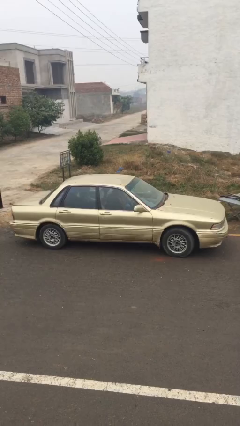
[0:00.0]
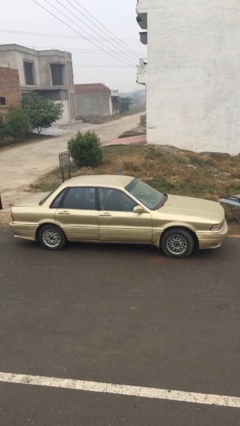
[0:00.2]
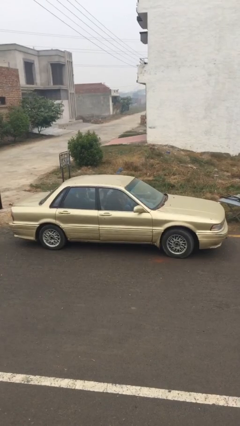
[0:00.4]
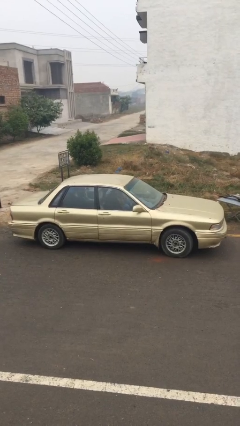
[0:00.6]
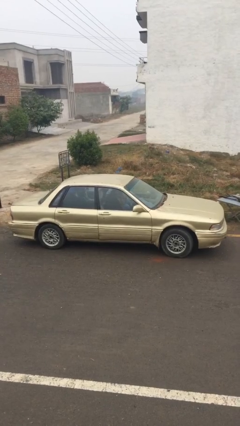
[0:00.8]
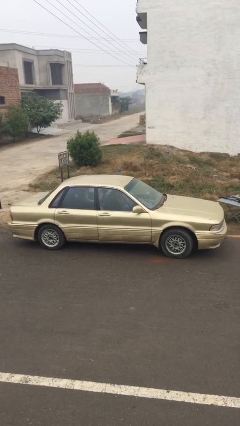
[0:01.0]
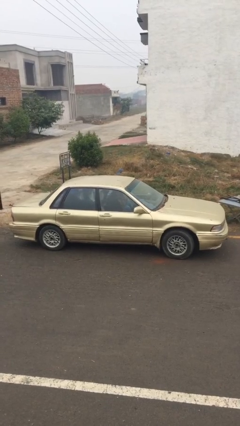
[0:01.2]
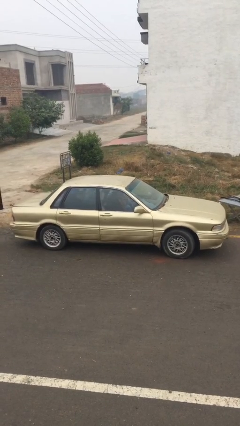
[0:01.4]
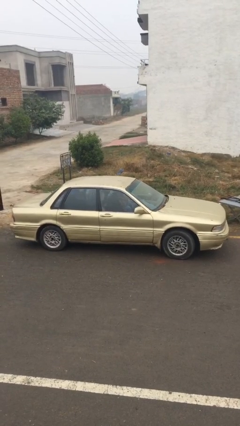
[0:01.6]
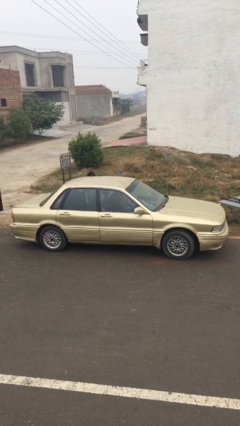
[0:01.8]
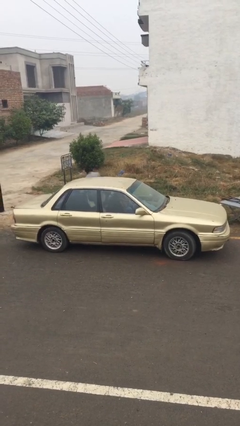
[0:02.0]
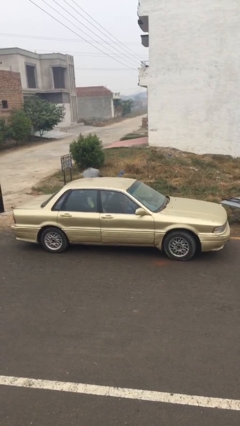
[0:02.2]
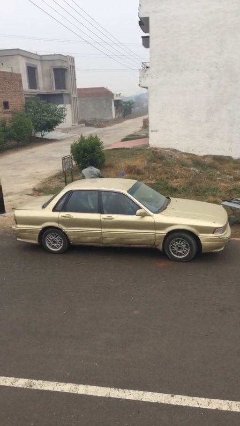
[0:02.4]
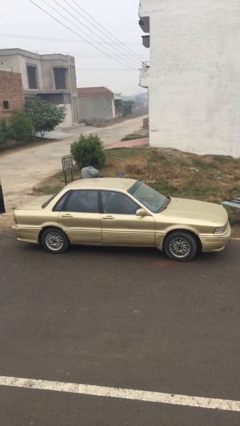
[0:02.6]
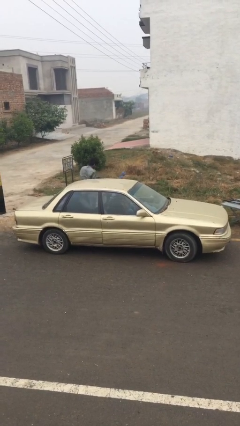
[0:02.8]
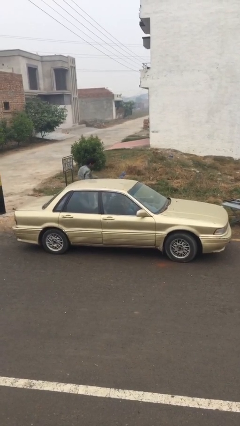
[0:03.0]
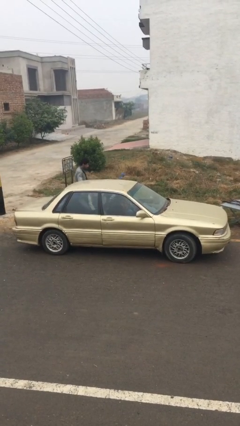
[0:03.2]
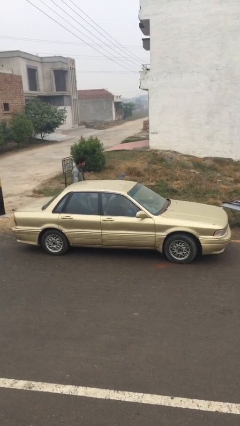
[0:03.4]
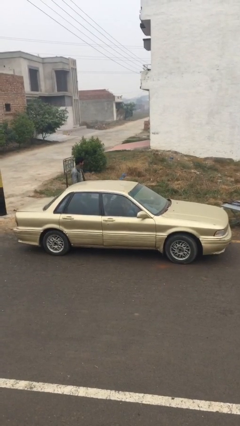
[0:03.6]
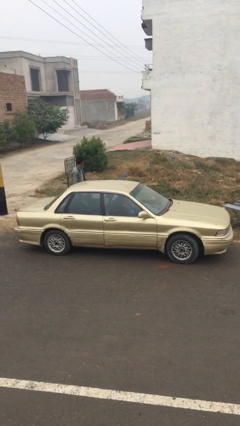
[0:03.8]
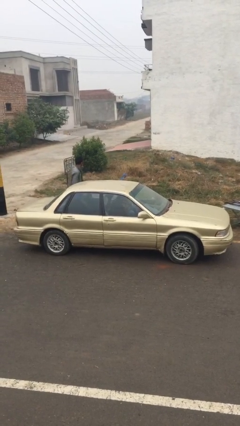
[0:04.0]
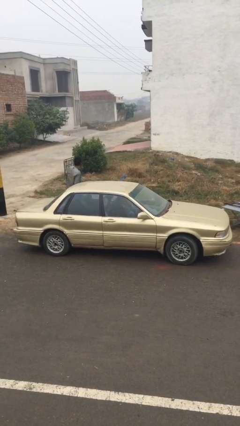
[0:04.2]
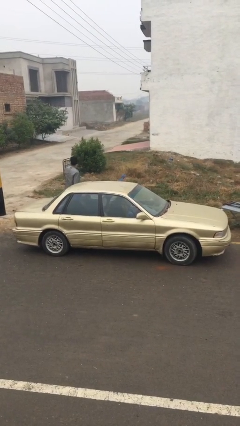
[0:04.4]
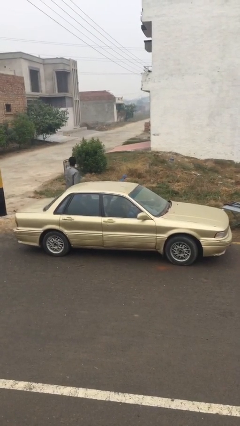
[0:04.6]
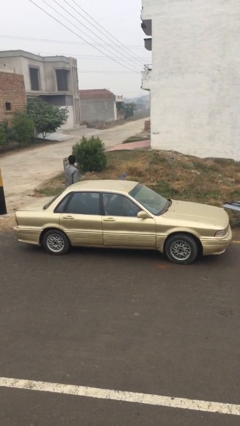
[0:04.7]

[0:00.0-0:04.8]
car drops off person

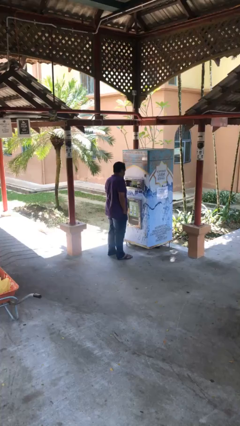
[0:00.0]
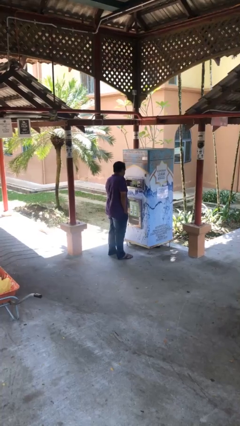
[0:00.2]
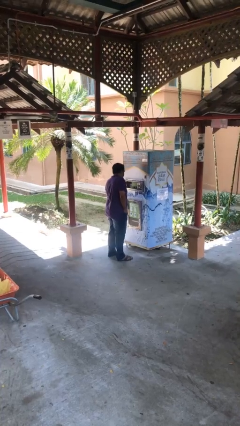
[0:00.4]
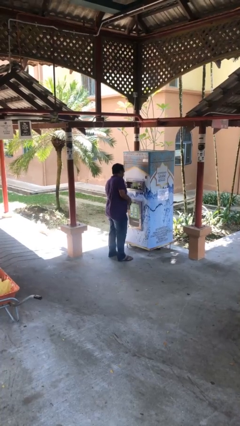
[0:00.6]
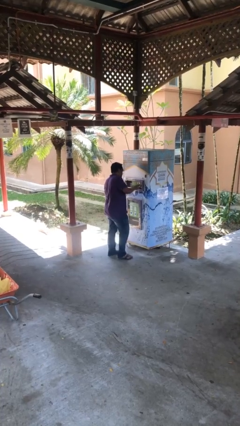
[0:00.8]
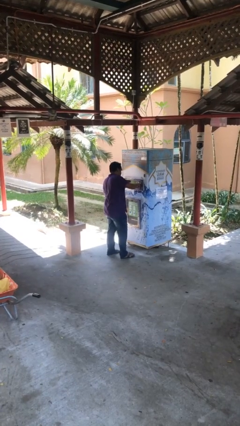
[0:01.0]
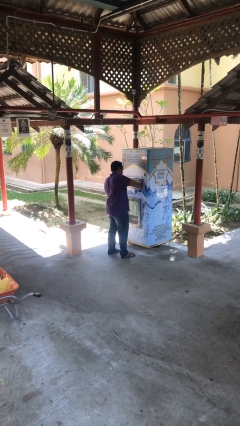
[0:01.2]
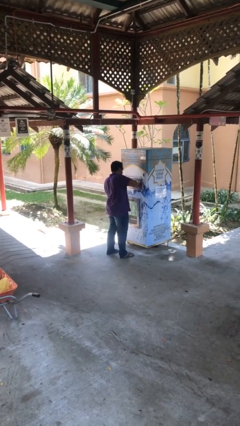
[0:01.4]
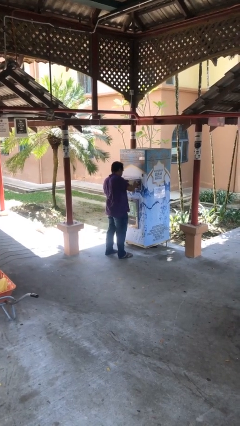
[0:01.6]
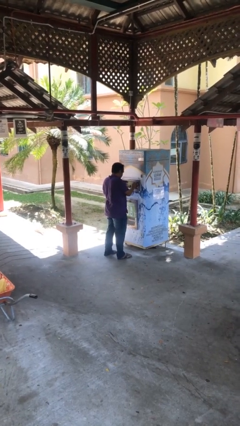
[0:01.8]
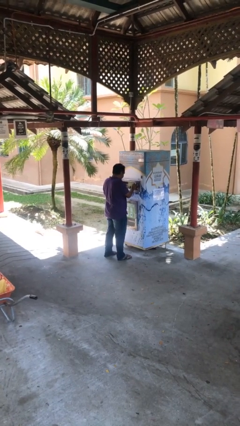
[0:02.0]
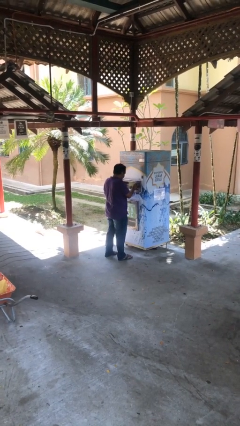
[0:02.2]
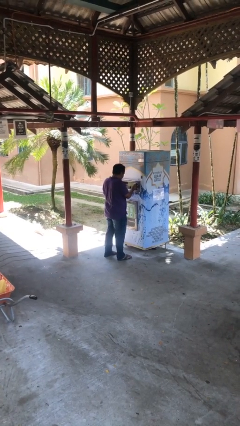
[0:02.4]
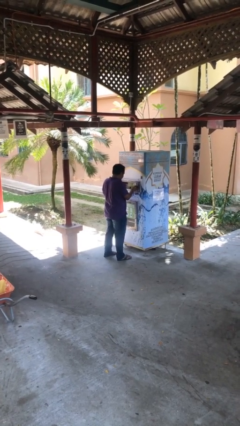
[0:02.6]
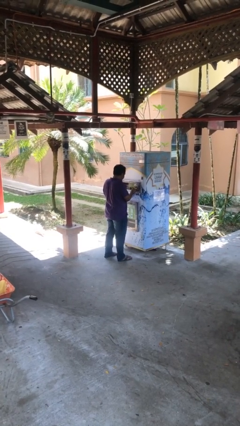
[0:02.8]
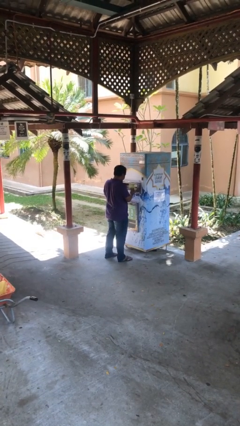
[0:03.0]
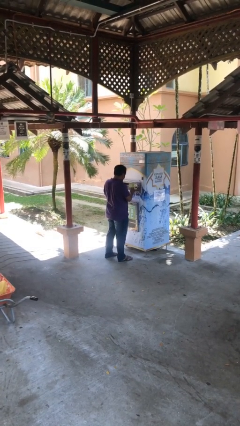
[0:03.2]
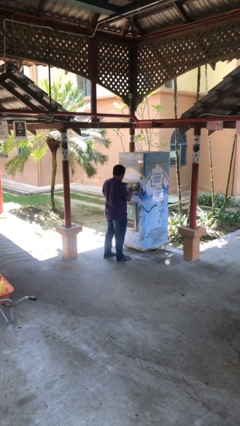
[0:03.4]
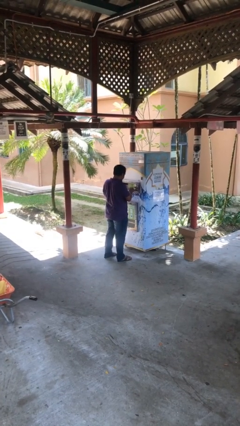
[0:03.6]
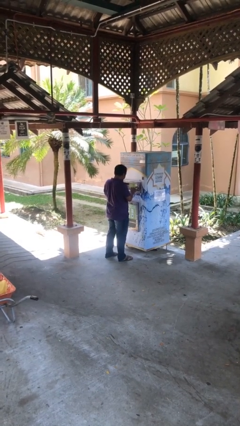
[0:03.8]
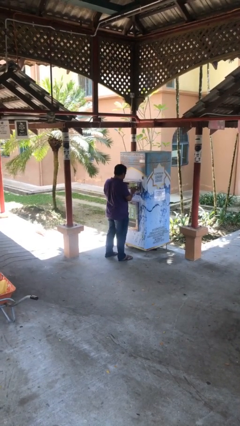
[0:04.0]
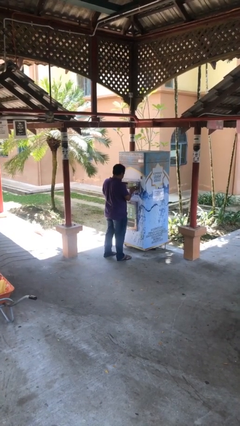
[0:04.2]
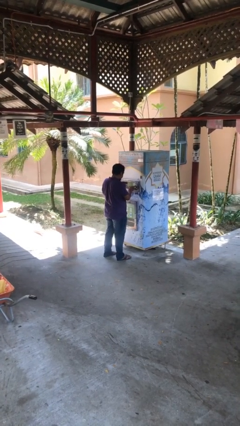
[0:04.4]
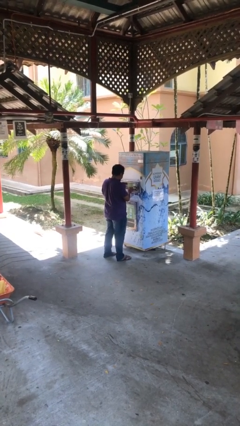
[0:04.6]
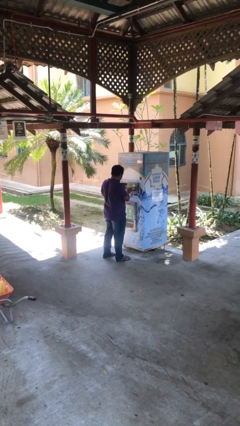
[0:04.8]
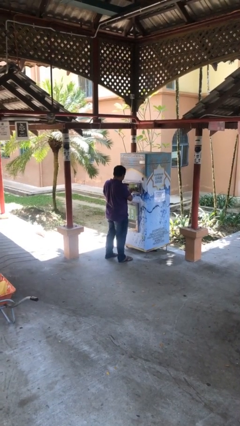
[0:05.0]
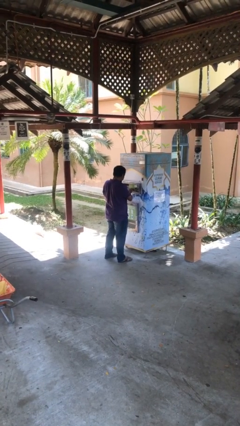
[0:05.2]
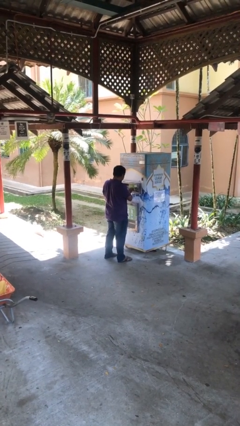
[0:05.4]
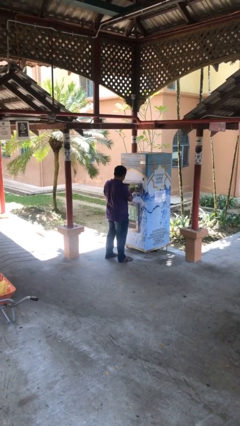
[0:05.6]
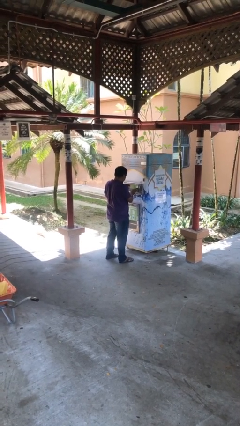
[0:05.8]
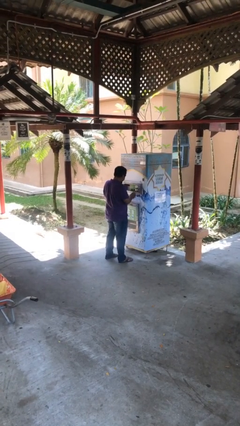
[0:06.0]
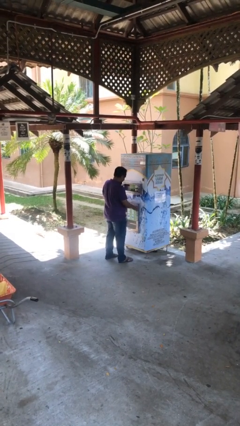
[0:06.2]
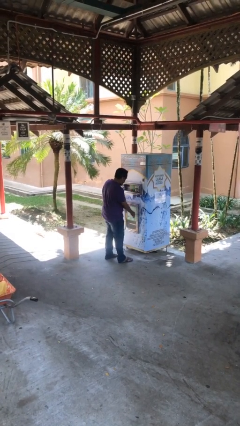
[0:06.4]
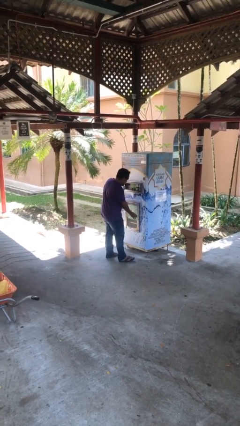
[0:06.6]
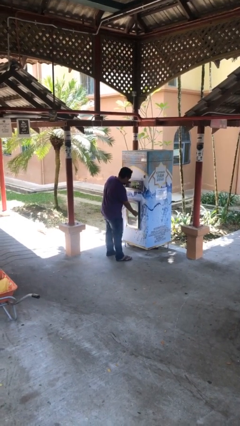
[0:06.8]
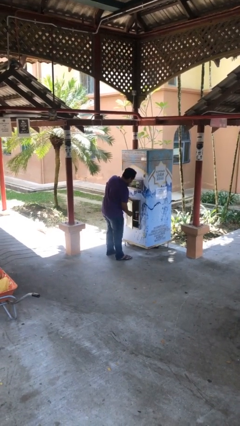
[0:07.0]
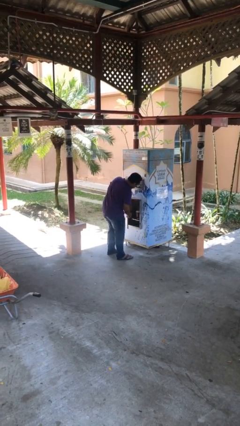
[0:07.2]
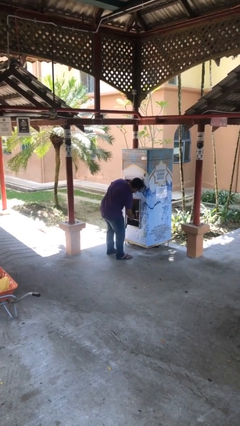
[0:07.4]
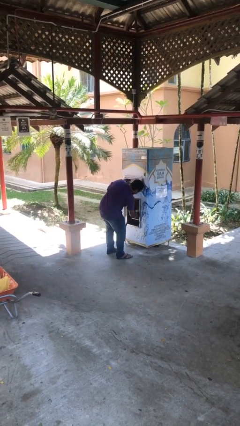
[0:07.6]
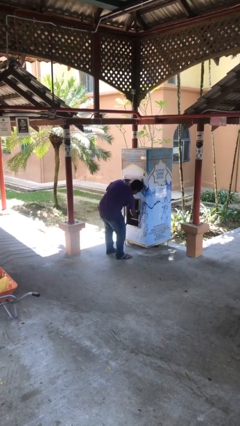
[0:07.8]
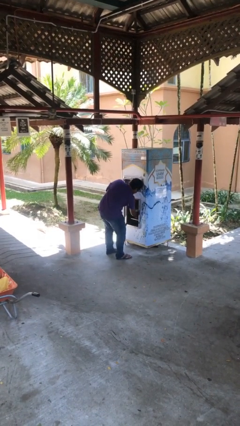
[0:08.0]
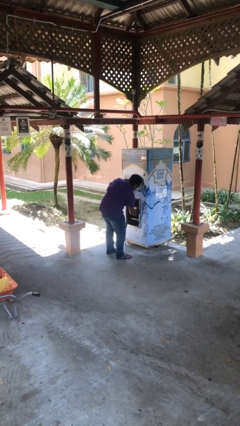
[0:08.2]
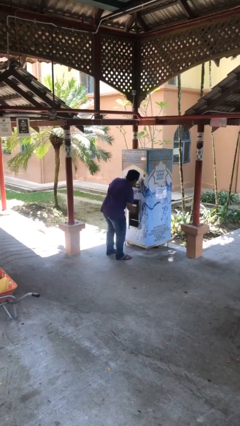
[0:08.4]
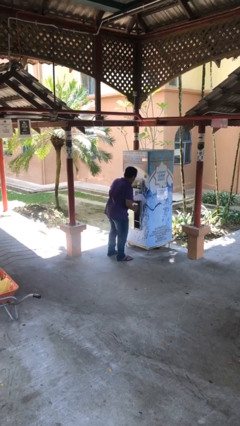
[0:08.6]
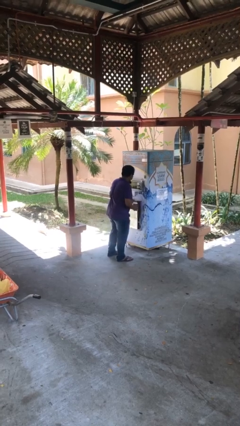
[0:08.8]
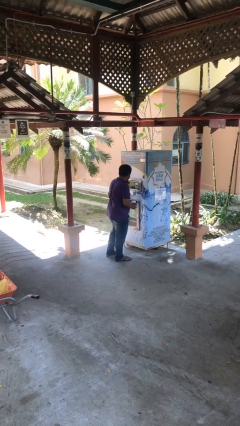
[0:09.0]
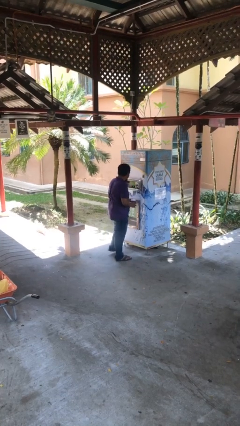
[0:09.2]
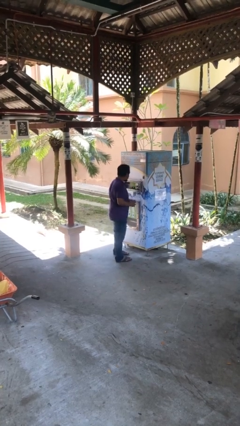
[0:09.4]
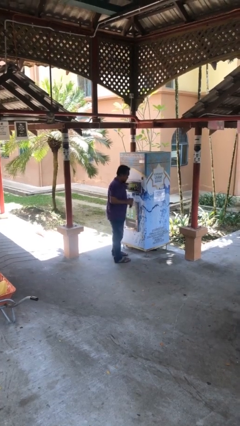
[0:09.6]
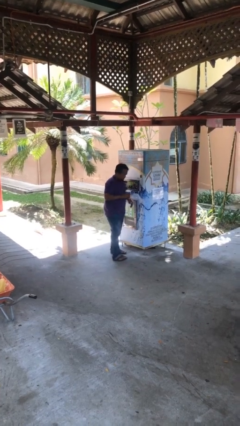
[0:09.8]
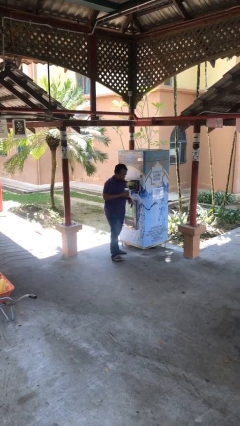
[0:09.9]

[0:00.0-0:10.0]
person purchases from machine

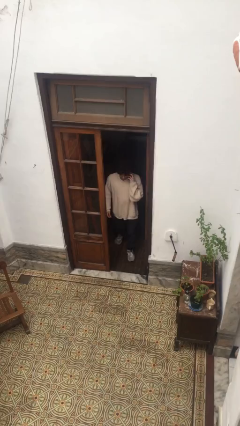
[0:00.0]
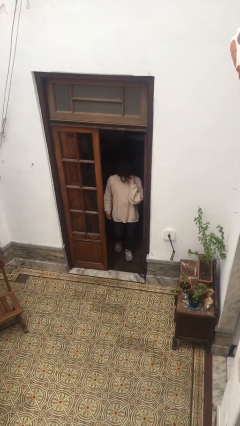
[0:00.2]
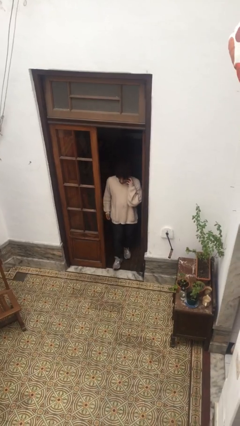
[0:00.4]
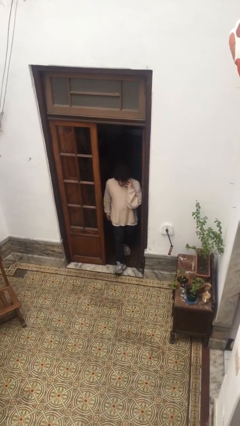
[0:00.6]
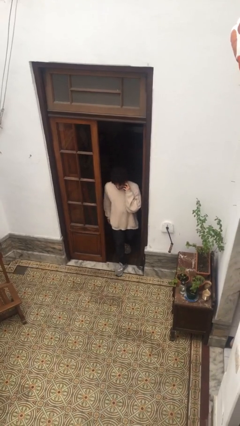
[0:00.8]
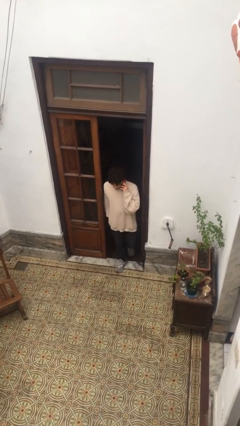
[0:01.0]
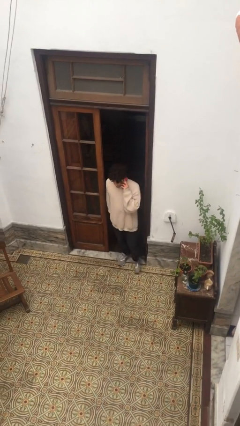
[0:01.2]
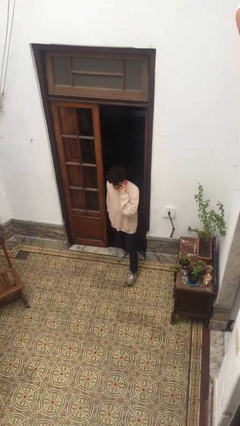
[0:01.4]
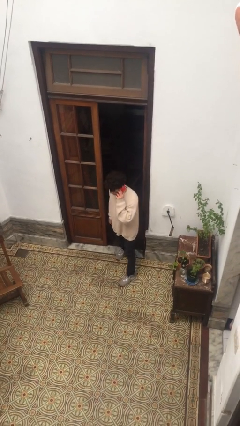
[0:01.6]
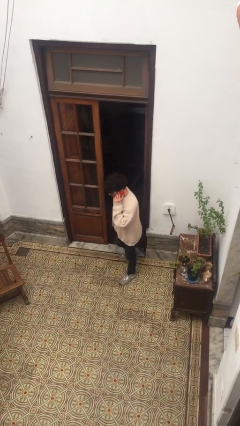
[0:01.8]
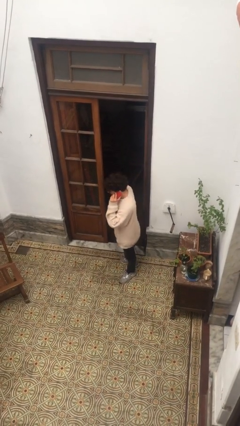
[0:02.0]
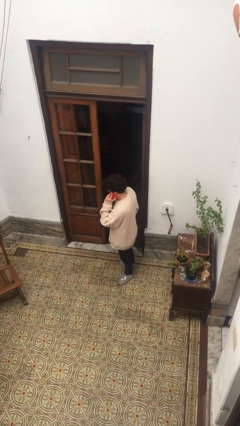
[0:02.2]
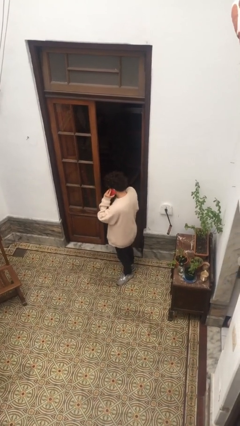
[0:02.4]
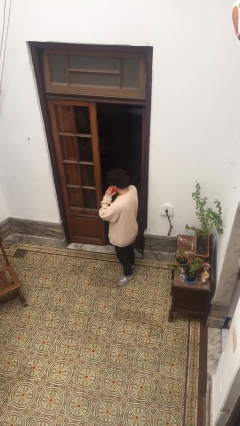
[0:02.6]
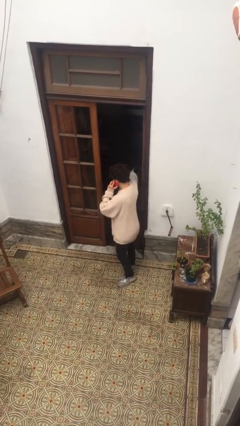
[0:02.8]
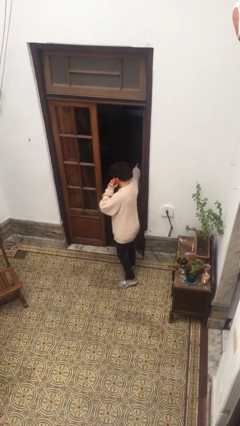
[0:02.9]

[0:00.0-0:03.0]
person enters scene through structure

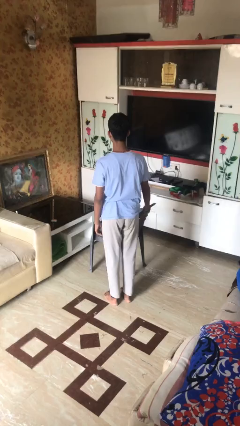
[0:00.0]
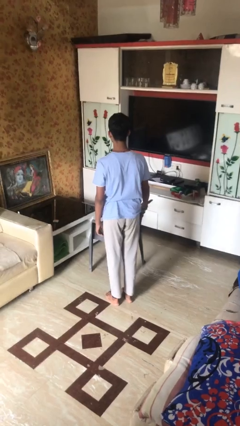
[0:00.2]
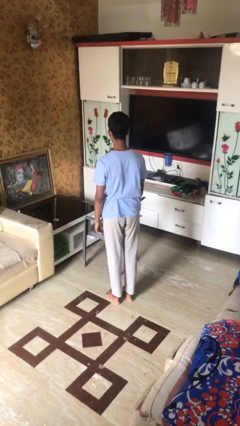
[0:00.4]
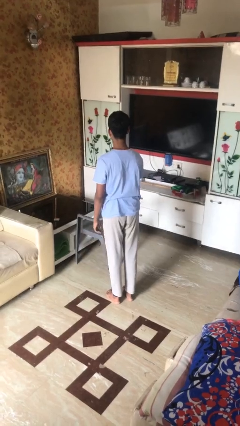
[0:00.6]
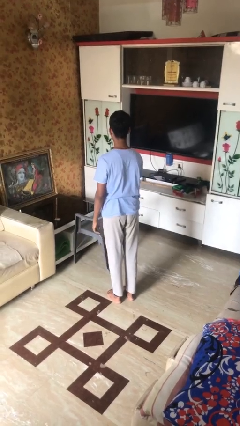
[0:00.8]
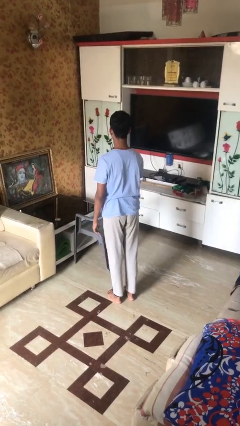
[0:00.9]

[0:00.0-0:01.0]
person pushes in chair
